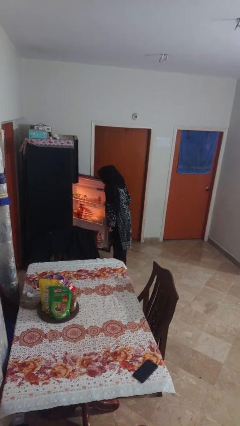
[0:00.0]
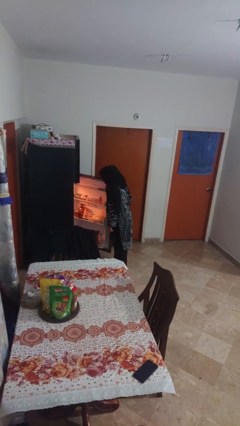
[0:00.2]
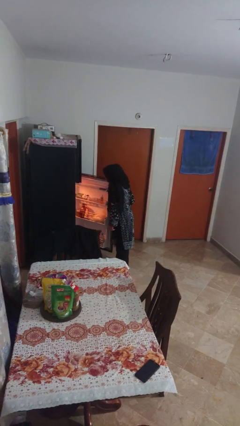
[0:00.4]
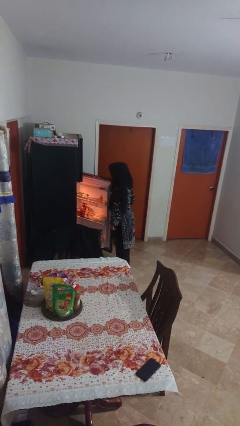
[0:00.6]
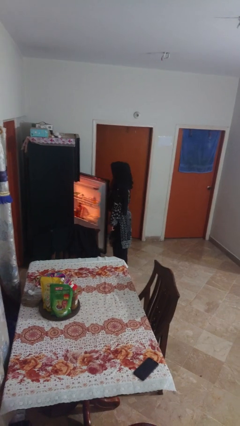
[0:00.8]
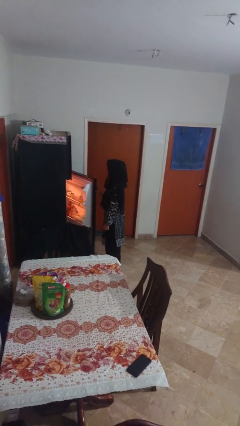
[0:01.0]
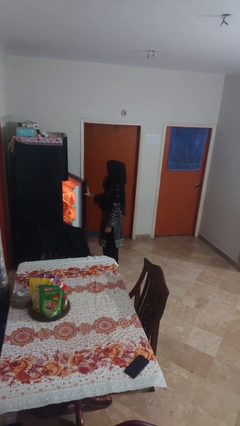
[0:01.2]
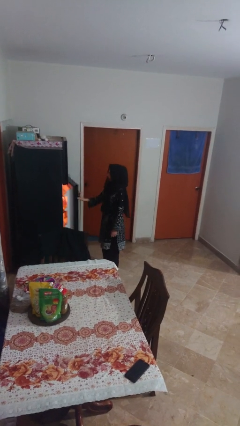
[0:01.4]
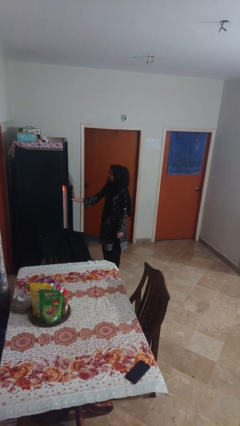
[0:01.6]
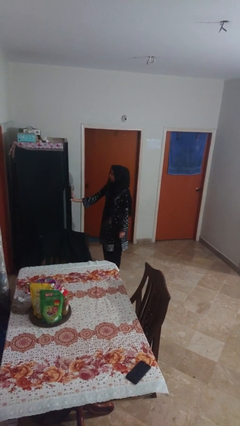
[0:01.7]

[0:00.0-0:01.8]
person closes refrigerator

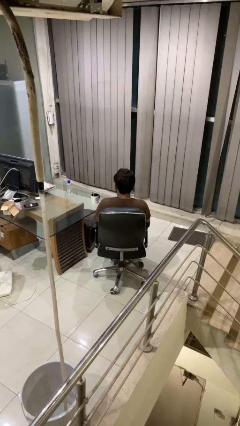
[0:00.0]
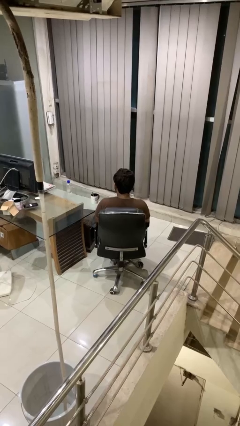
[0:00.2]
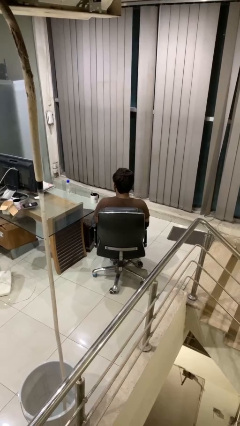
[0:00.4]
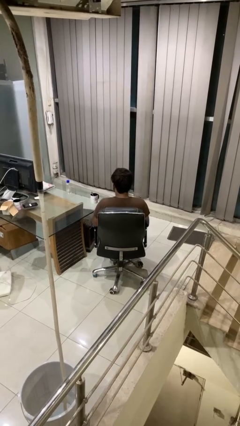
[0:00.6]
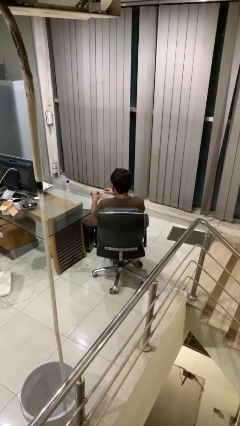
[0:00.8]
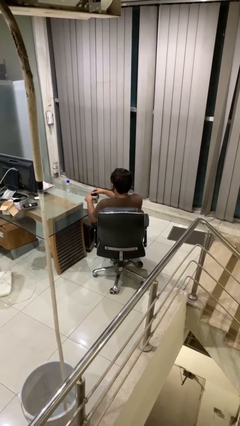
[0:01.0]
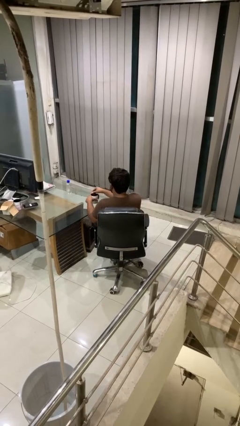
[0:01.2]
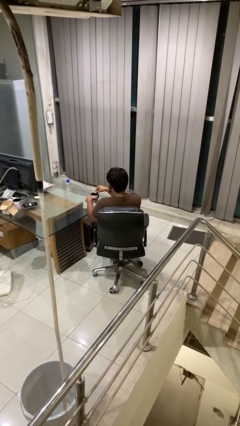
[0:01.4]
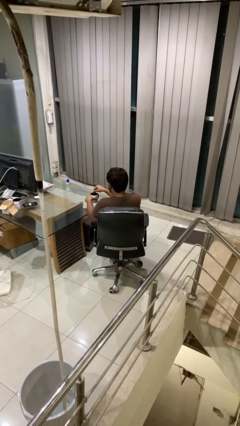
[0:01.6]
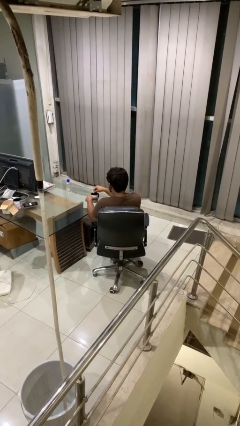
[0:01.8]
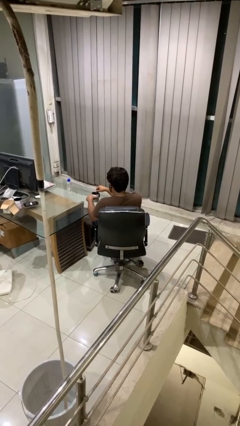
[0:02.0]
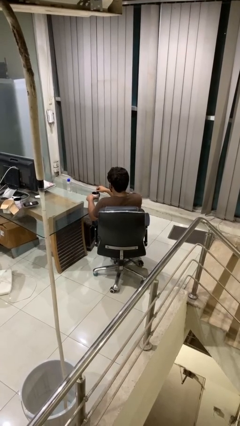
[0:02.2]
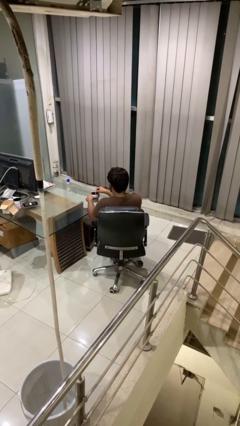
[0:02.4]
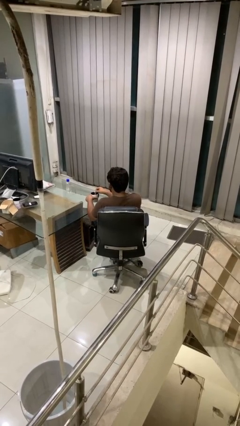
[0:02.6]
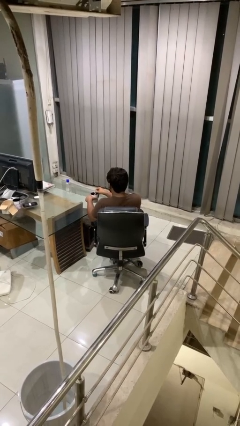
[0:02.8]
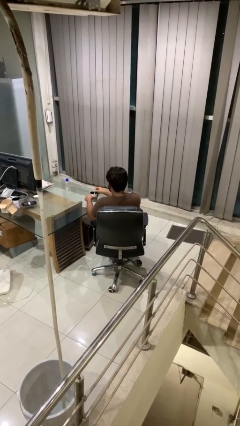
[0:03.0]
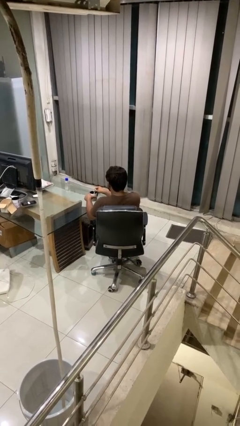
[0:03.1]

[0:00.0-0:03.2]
person stirs mug

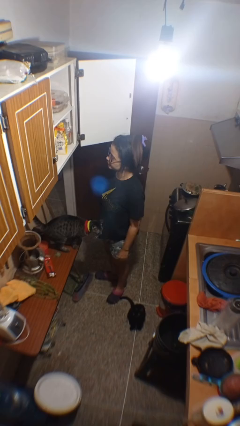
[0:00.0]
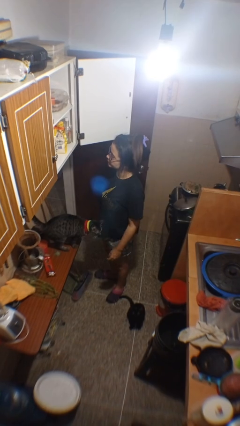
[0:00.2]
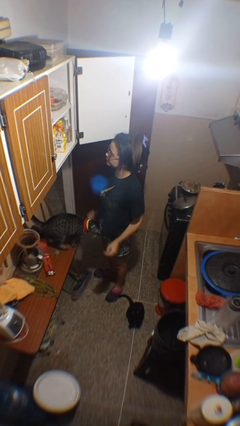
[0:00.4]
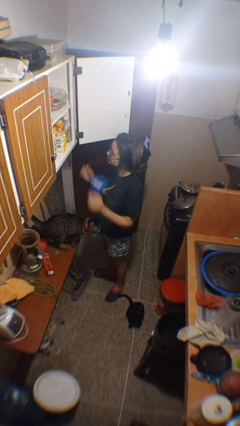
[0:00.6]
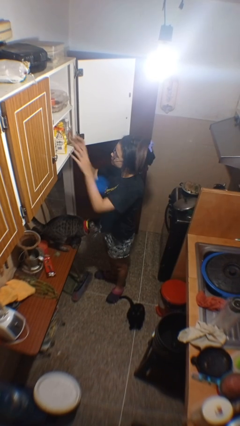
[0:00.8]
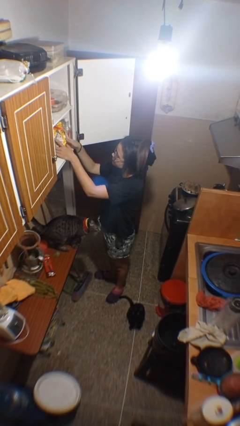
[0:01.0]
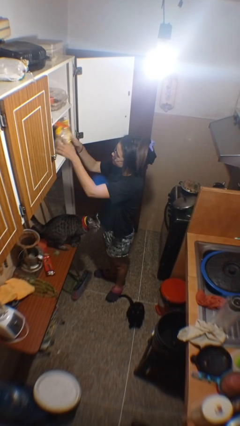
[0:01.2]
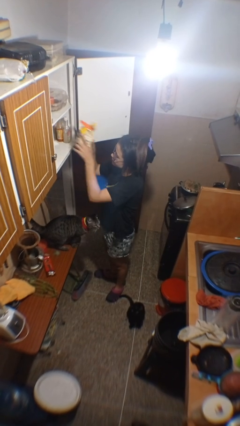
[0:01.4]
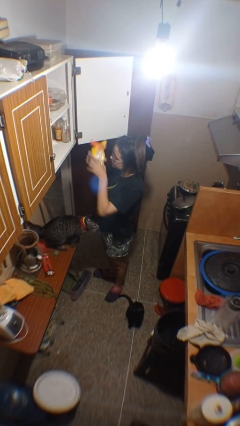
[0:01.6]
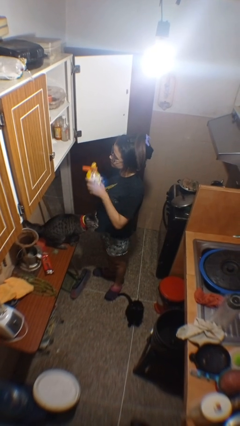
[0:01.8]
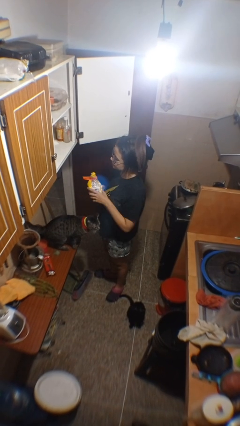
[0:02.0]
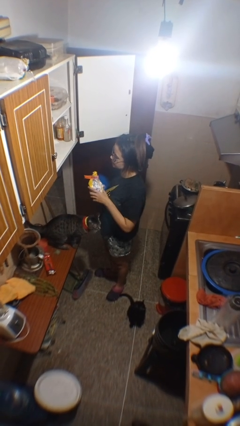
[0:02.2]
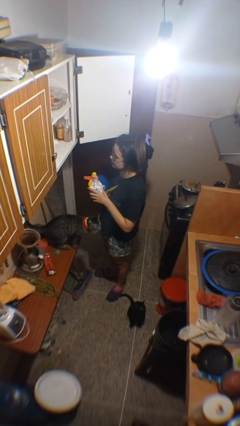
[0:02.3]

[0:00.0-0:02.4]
person picks up object from cabinet

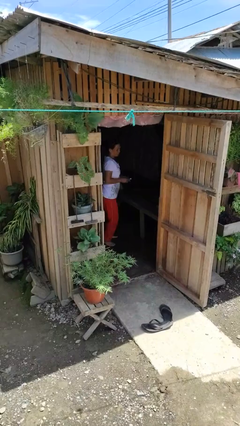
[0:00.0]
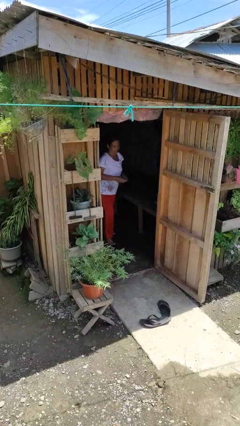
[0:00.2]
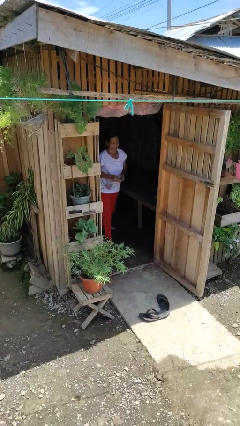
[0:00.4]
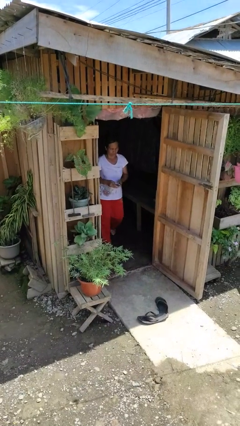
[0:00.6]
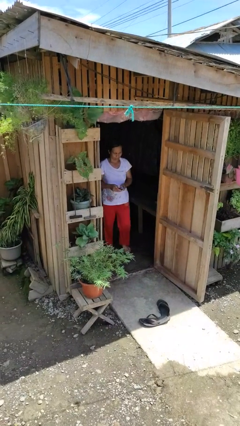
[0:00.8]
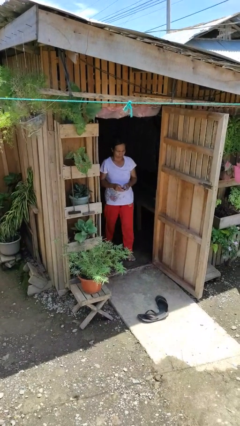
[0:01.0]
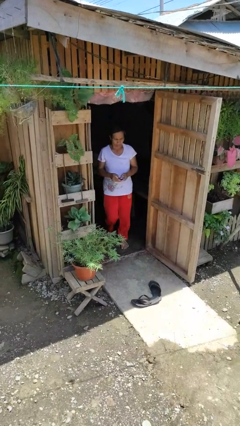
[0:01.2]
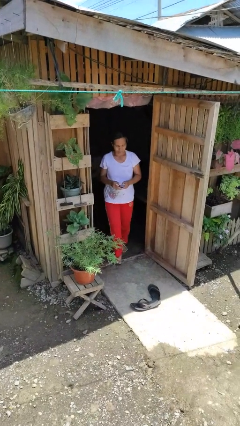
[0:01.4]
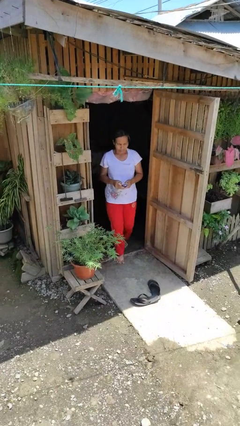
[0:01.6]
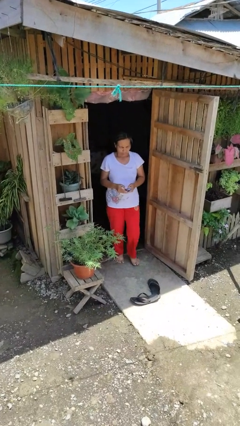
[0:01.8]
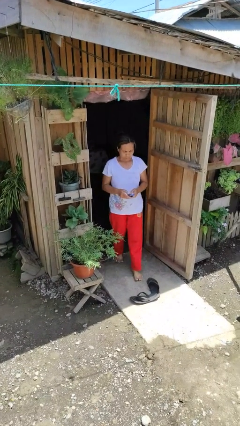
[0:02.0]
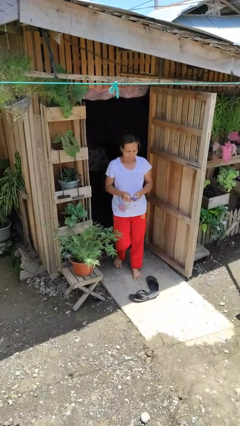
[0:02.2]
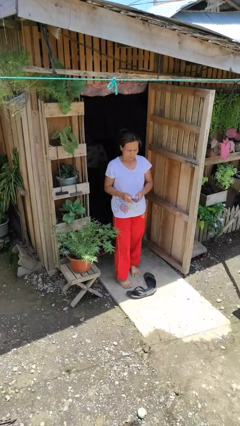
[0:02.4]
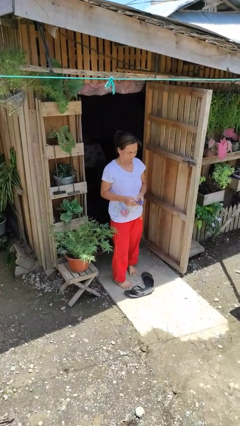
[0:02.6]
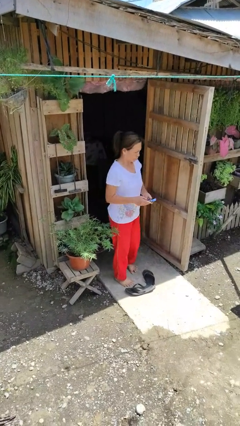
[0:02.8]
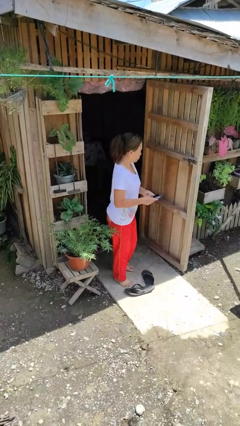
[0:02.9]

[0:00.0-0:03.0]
person enters scene through structure

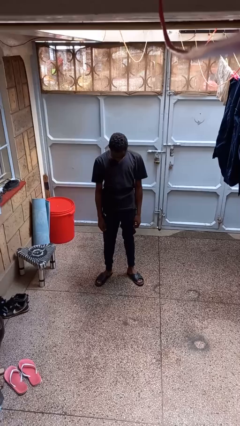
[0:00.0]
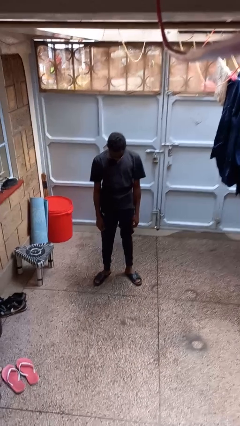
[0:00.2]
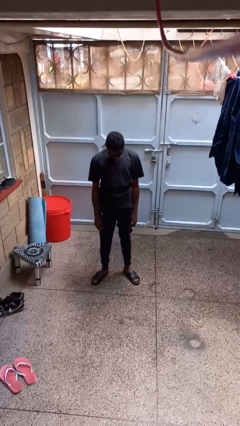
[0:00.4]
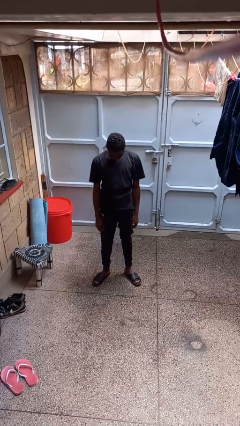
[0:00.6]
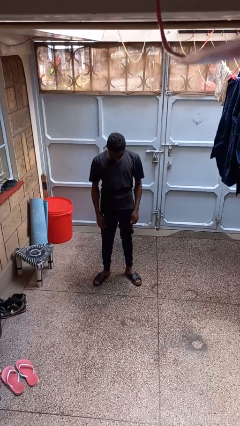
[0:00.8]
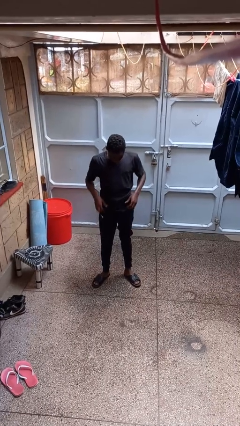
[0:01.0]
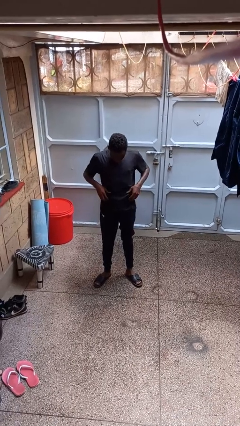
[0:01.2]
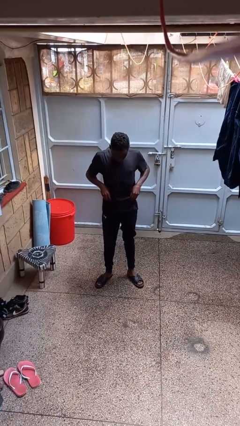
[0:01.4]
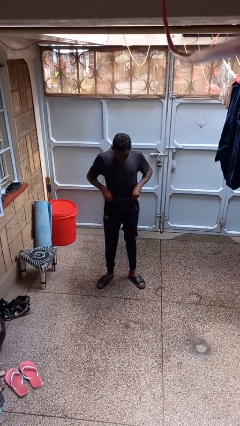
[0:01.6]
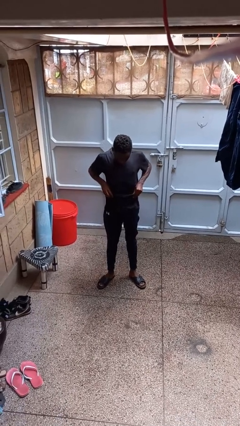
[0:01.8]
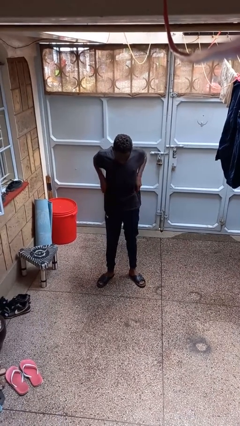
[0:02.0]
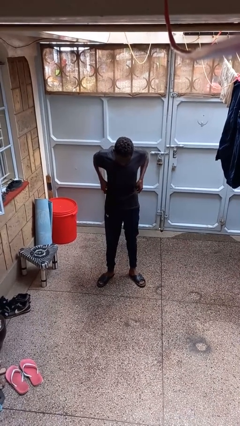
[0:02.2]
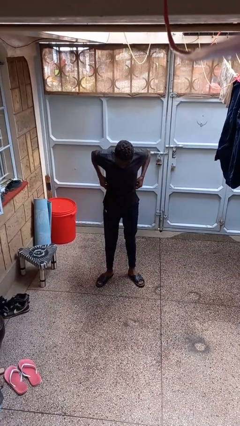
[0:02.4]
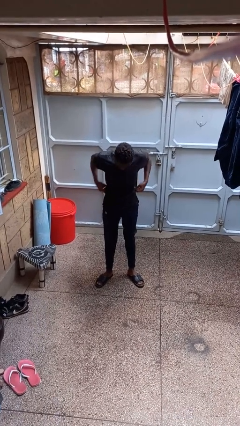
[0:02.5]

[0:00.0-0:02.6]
person hikes up pants

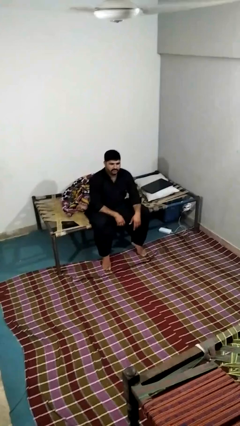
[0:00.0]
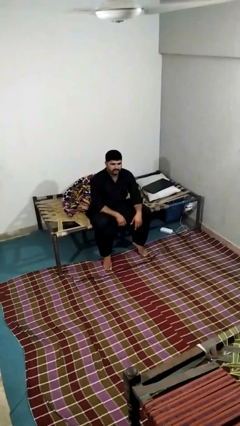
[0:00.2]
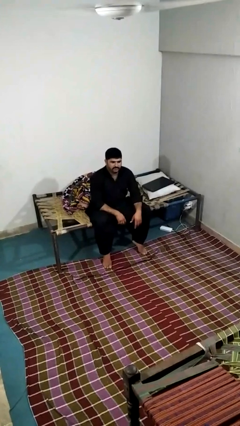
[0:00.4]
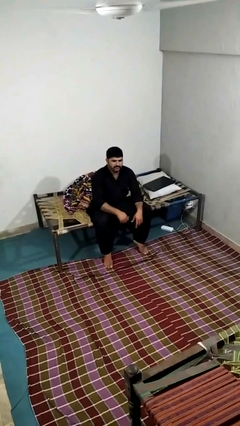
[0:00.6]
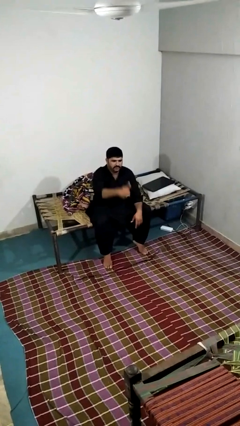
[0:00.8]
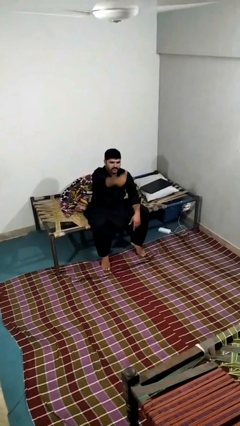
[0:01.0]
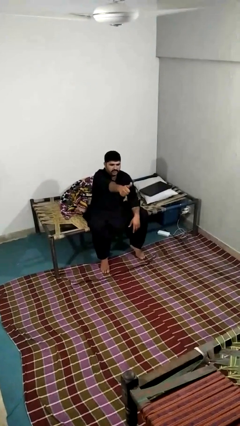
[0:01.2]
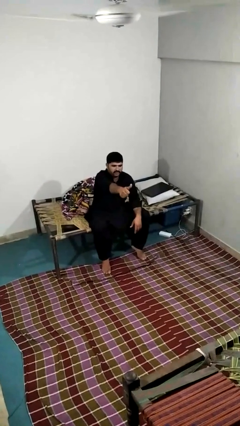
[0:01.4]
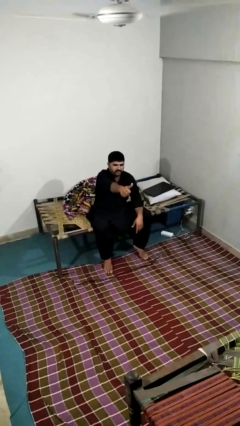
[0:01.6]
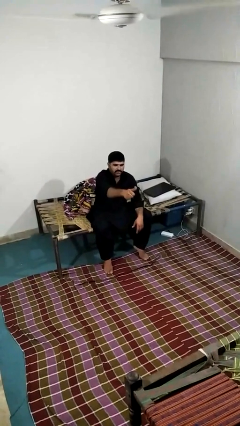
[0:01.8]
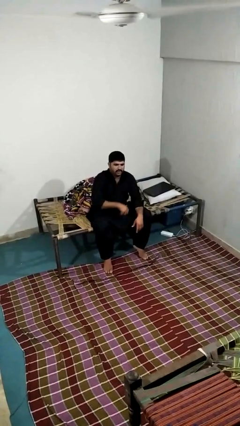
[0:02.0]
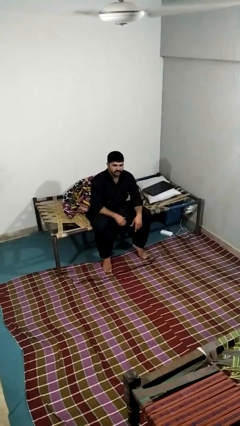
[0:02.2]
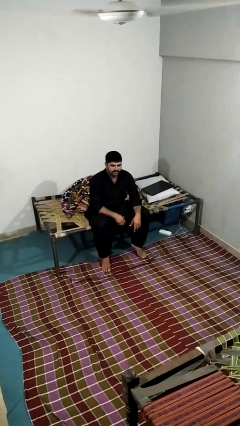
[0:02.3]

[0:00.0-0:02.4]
person gestures thumbs up

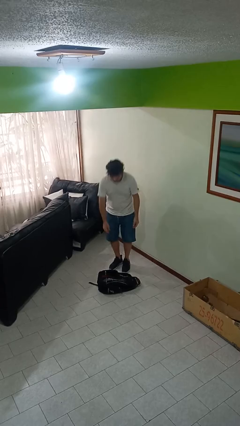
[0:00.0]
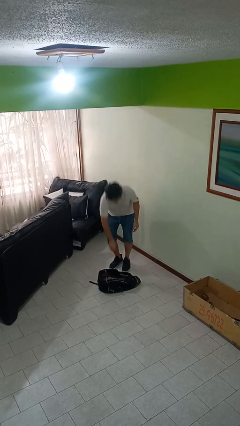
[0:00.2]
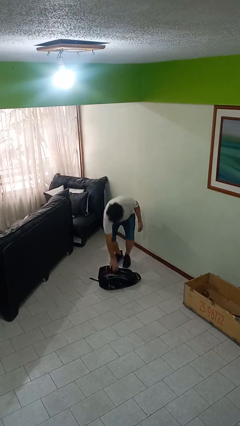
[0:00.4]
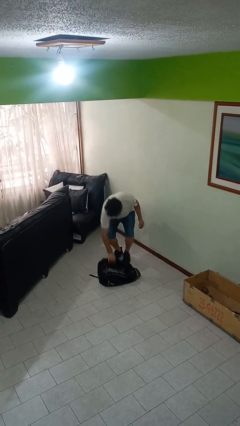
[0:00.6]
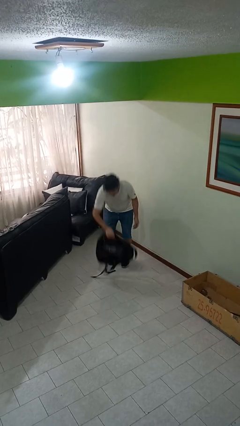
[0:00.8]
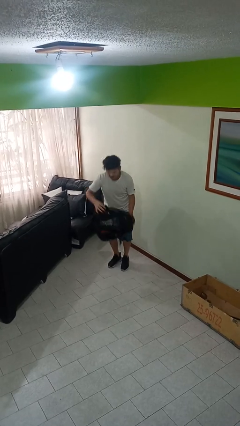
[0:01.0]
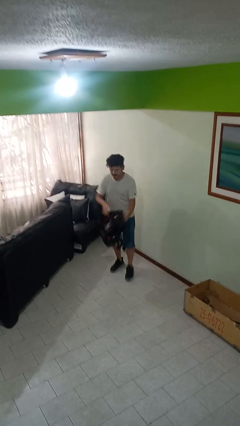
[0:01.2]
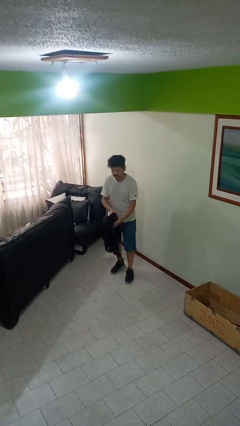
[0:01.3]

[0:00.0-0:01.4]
person picks up object from floor

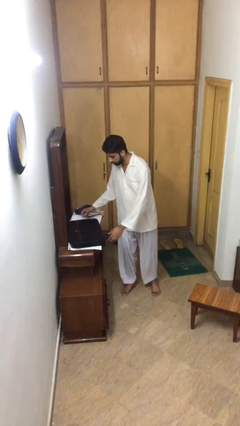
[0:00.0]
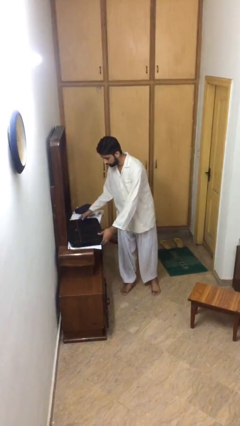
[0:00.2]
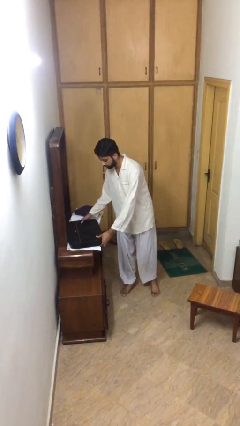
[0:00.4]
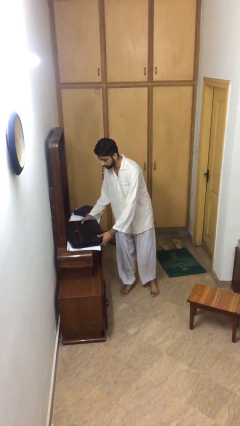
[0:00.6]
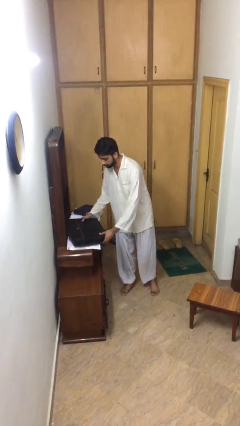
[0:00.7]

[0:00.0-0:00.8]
person picks up object from table
